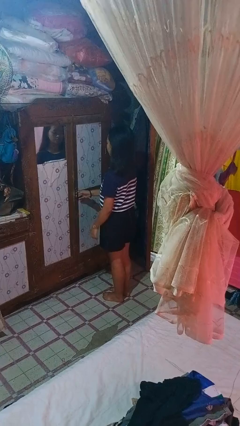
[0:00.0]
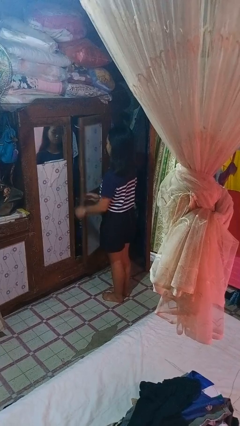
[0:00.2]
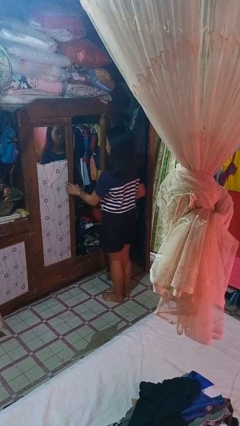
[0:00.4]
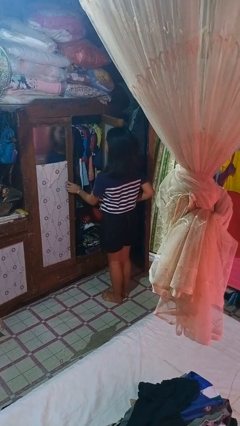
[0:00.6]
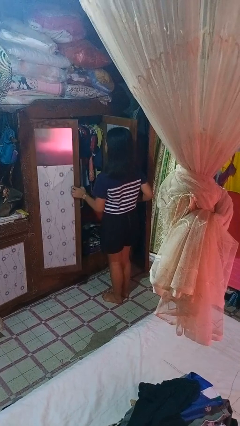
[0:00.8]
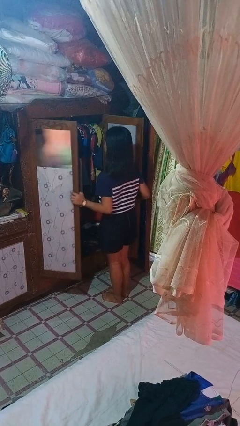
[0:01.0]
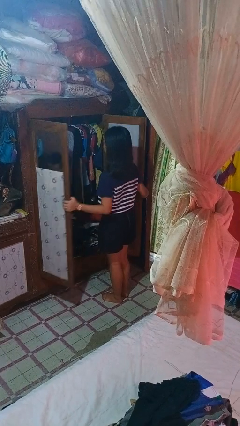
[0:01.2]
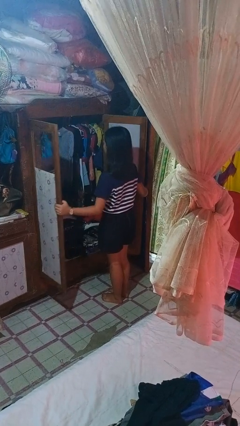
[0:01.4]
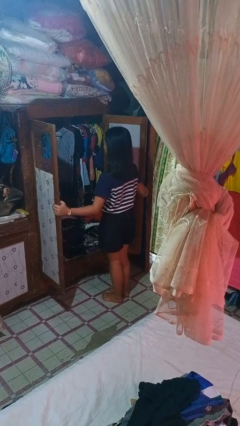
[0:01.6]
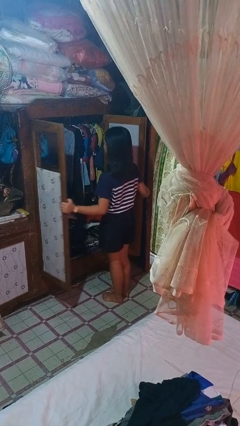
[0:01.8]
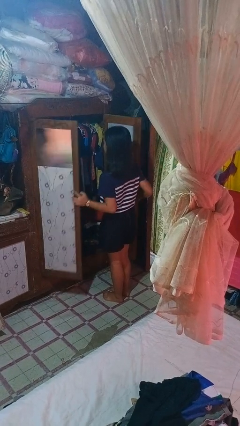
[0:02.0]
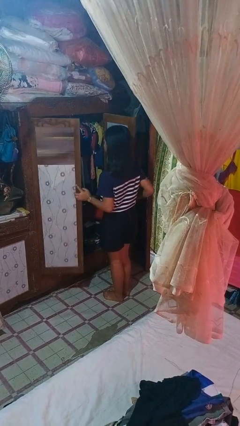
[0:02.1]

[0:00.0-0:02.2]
person opens closet door

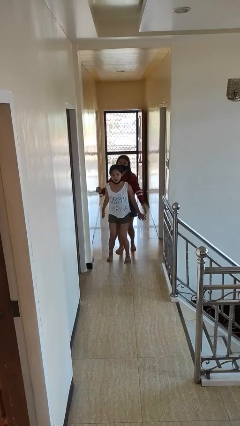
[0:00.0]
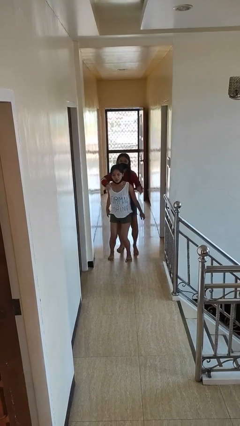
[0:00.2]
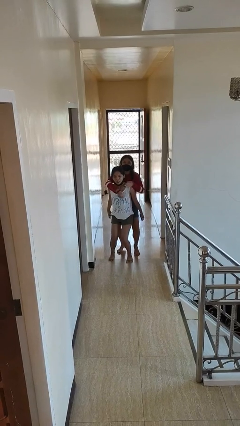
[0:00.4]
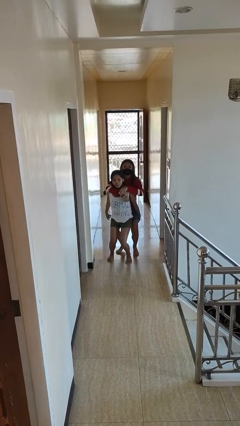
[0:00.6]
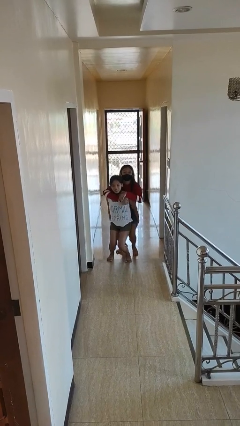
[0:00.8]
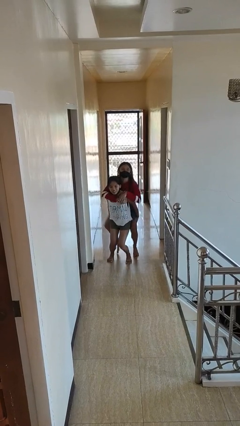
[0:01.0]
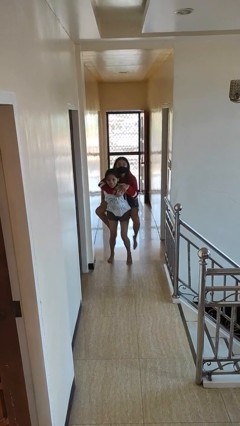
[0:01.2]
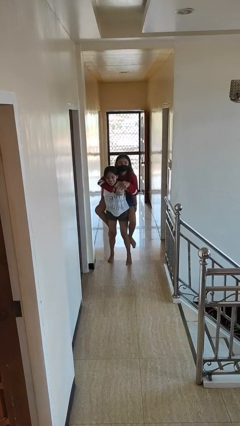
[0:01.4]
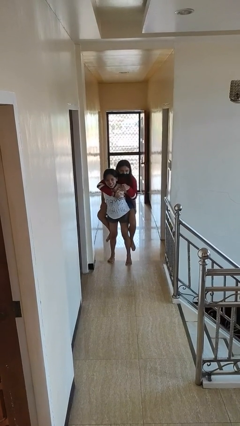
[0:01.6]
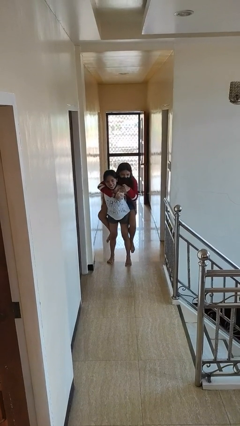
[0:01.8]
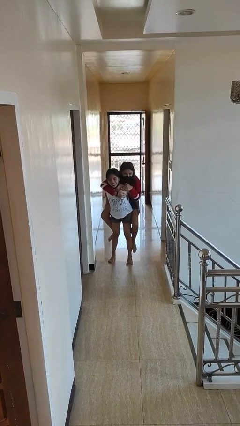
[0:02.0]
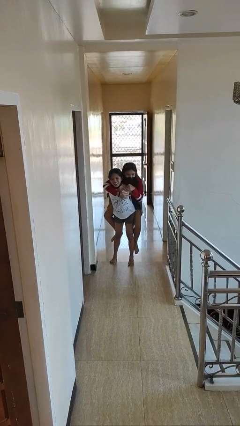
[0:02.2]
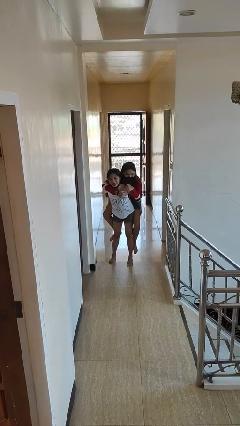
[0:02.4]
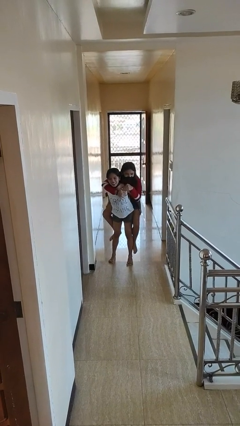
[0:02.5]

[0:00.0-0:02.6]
person carries person over shoulder

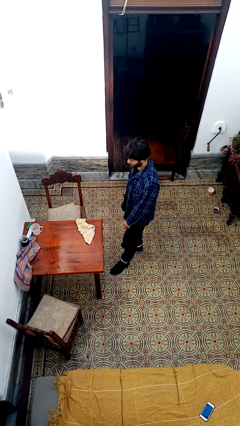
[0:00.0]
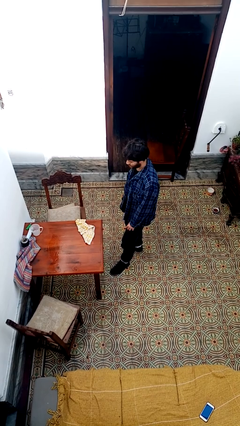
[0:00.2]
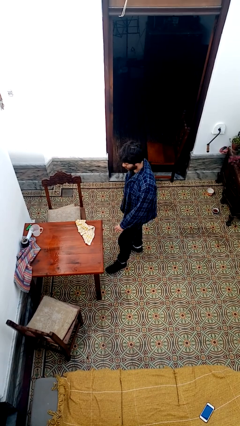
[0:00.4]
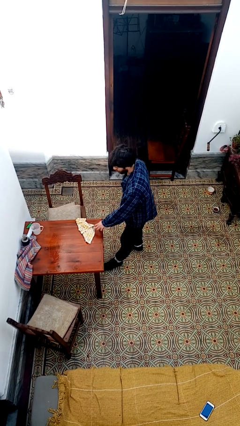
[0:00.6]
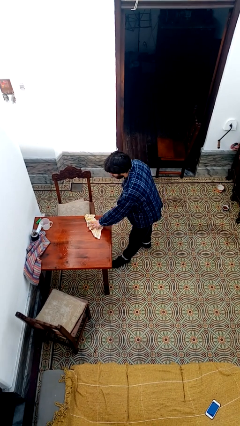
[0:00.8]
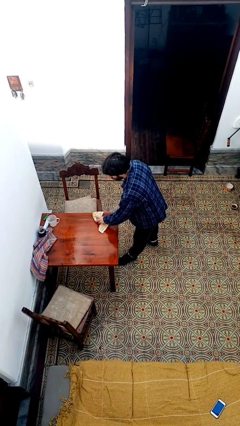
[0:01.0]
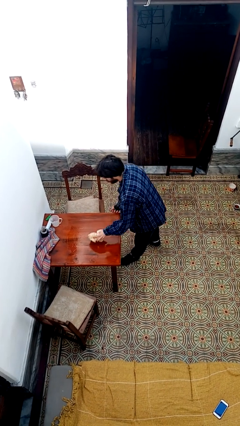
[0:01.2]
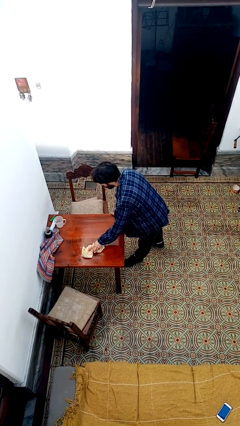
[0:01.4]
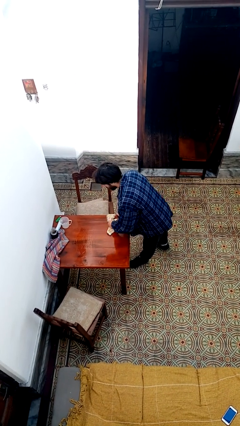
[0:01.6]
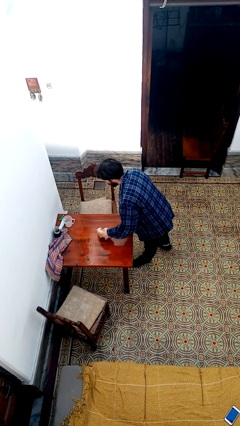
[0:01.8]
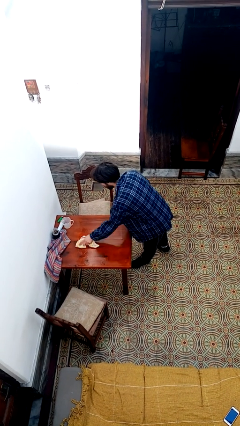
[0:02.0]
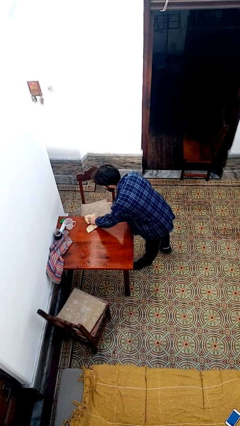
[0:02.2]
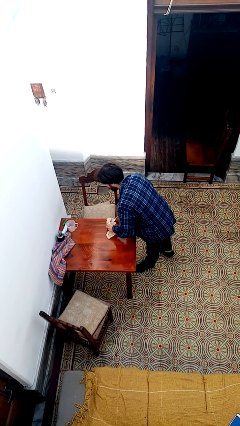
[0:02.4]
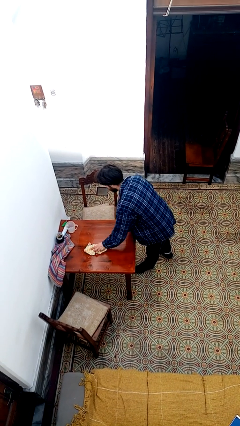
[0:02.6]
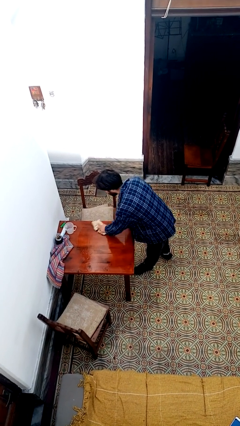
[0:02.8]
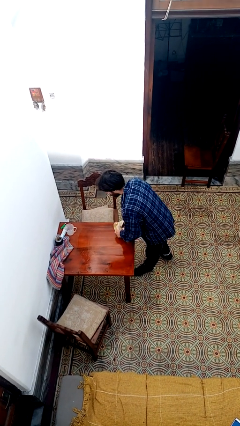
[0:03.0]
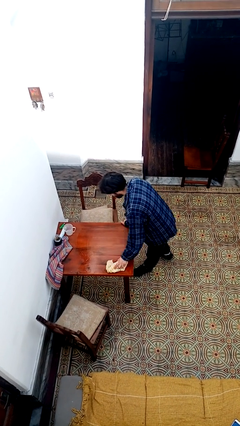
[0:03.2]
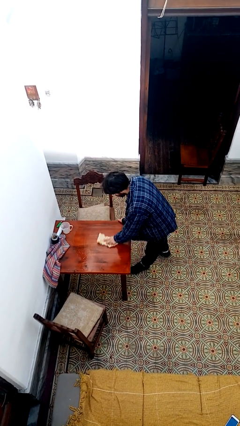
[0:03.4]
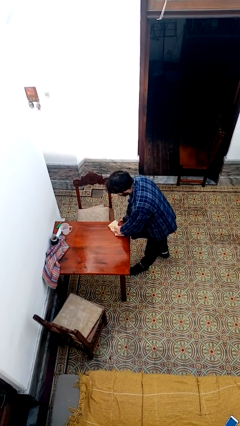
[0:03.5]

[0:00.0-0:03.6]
person cleans table with rag

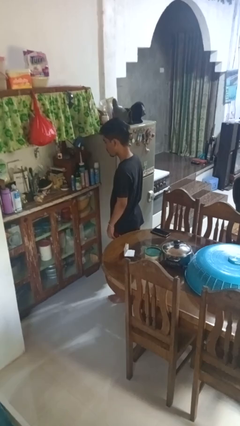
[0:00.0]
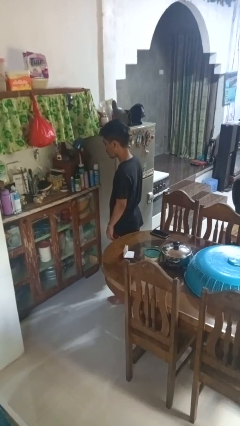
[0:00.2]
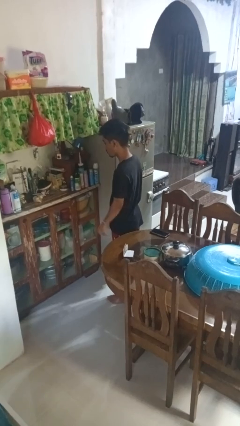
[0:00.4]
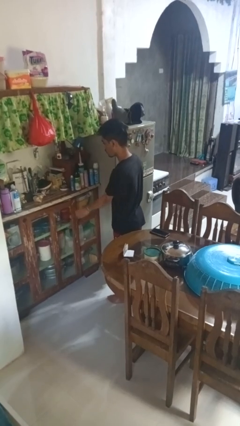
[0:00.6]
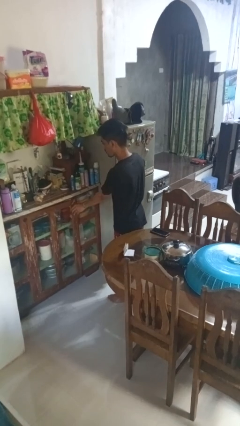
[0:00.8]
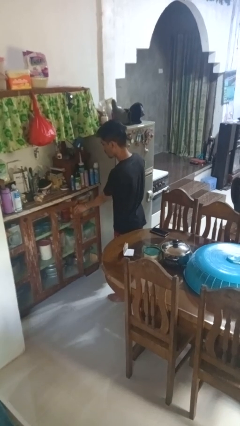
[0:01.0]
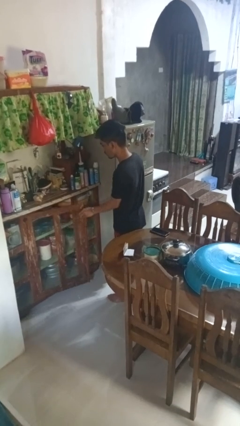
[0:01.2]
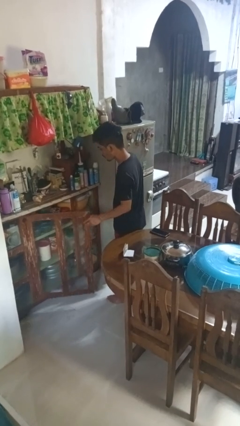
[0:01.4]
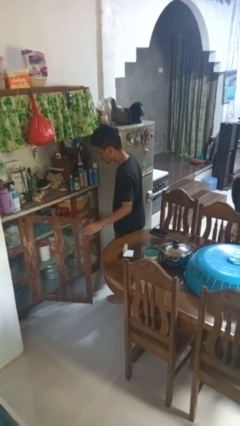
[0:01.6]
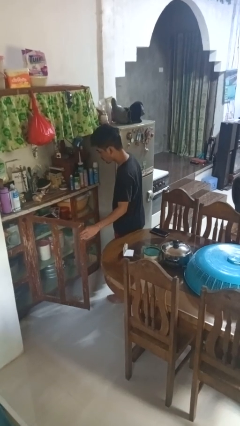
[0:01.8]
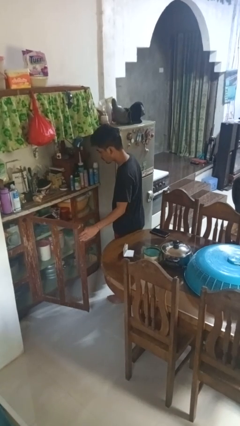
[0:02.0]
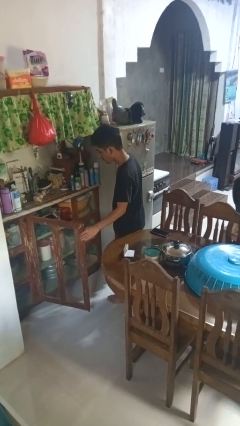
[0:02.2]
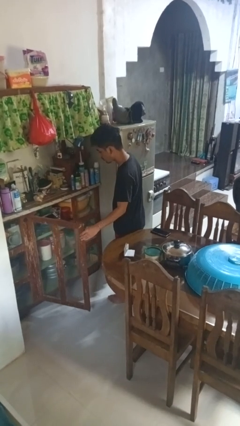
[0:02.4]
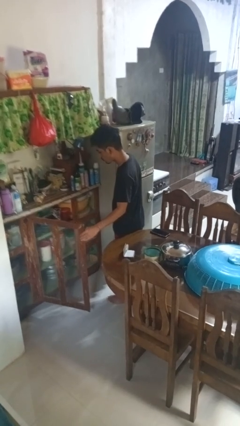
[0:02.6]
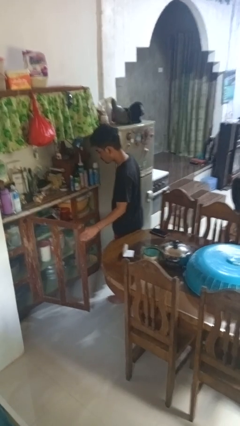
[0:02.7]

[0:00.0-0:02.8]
person opens cabinet

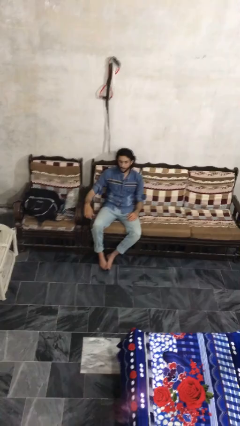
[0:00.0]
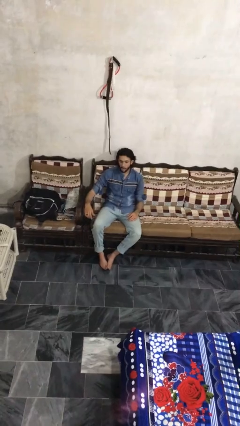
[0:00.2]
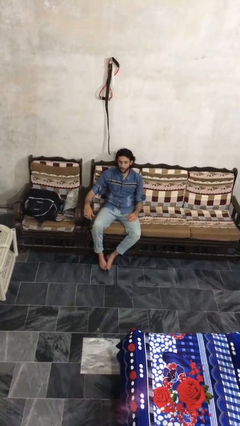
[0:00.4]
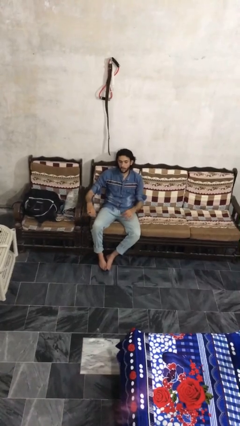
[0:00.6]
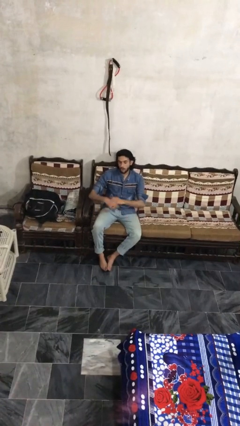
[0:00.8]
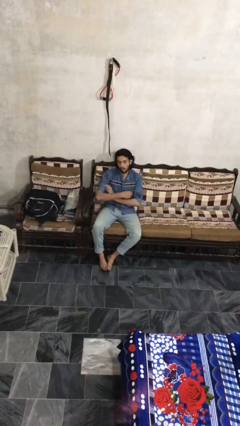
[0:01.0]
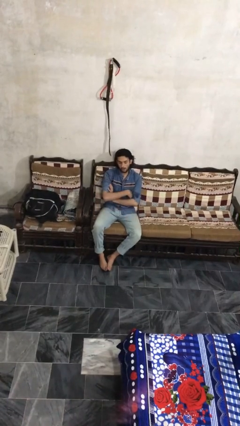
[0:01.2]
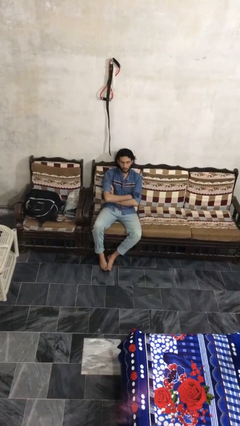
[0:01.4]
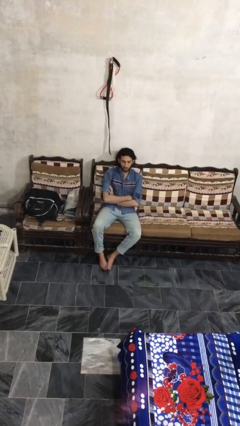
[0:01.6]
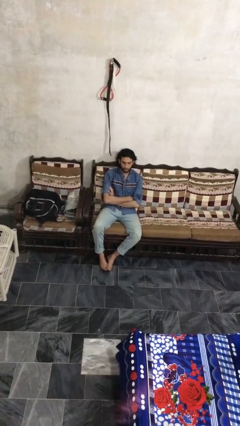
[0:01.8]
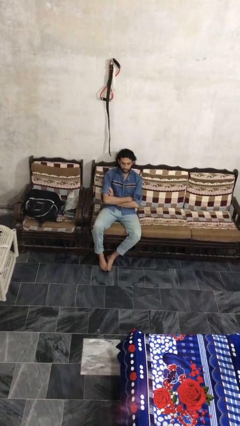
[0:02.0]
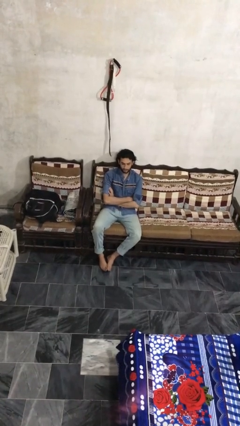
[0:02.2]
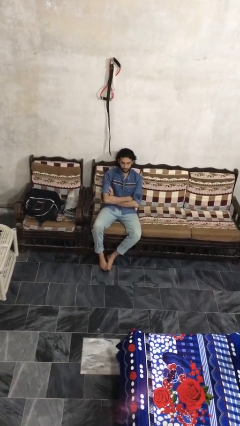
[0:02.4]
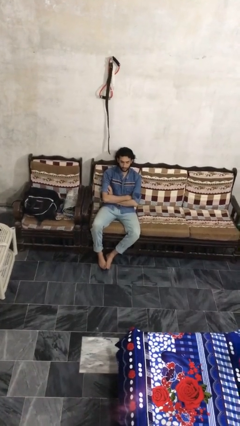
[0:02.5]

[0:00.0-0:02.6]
person crosses arms

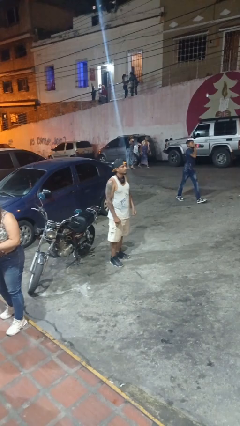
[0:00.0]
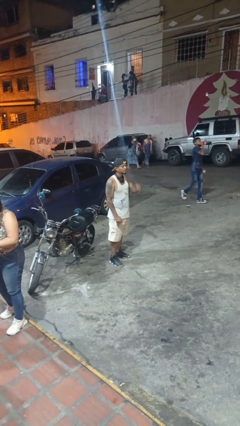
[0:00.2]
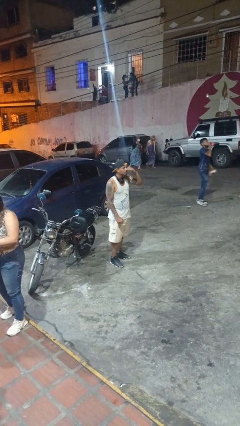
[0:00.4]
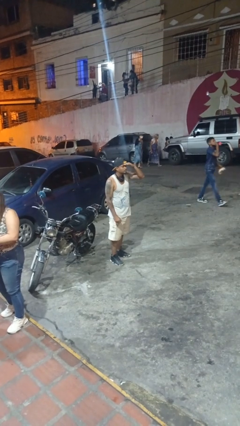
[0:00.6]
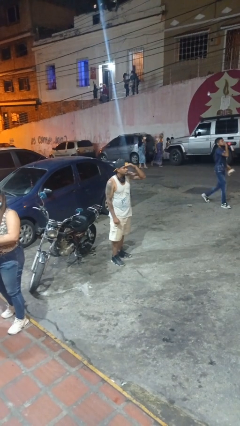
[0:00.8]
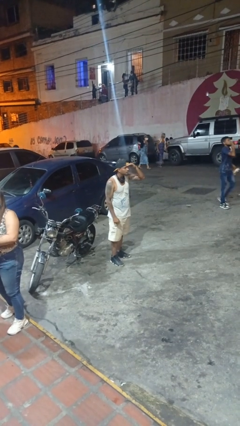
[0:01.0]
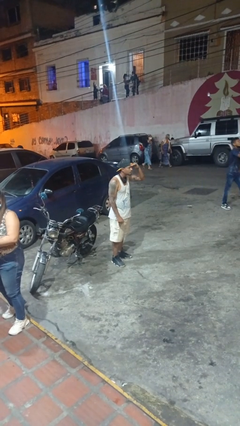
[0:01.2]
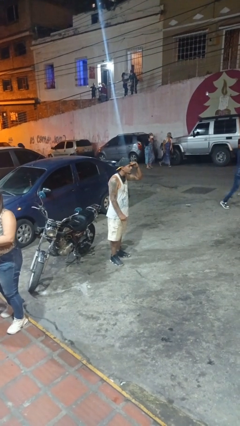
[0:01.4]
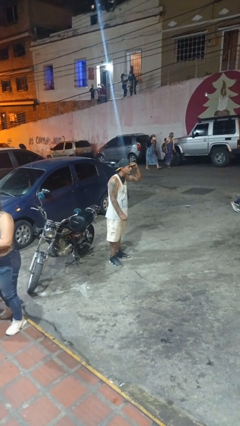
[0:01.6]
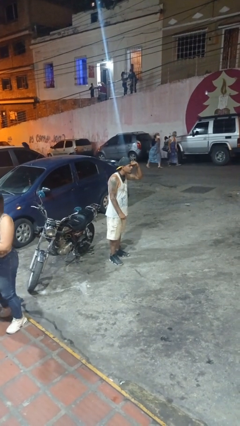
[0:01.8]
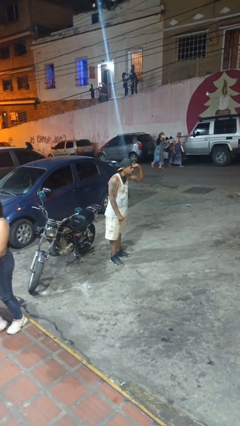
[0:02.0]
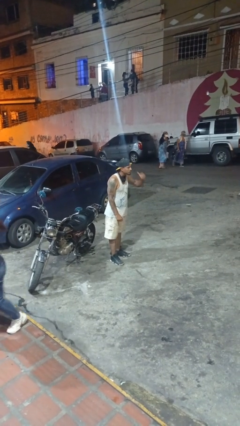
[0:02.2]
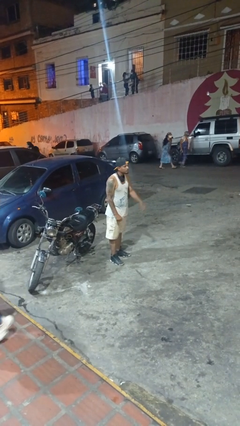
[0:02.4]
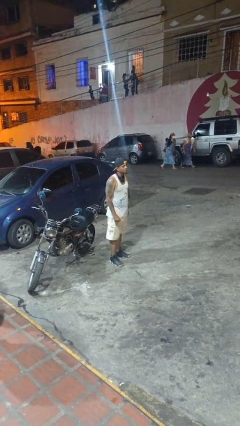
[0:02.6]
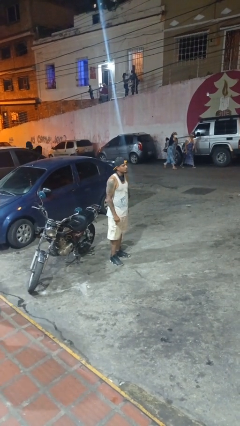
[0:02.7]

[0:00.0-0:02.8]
person shades eyes

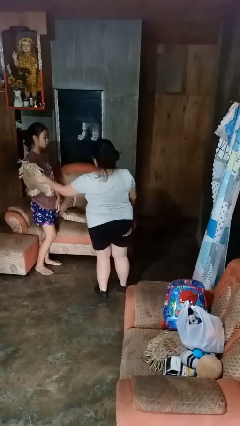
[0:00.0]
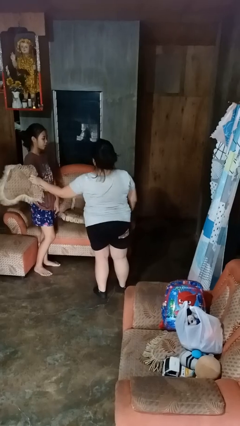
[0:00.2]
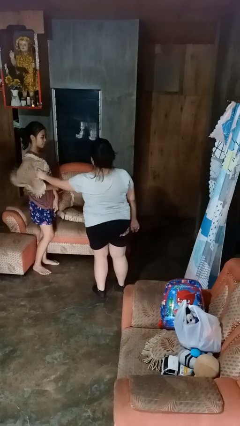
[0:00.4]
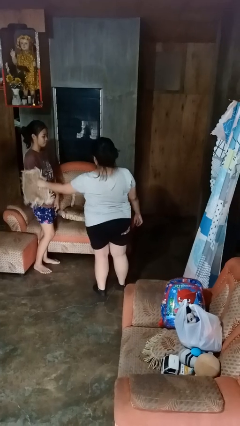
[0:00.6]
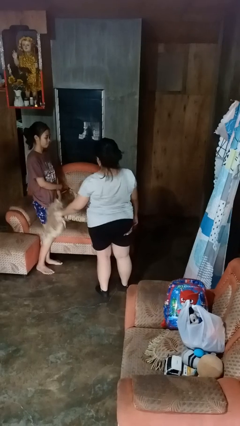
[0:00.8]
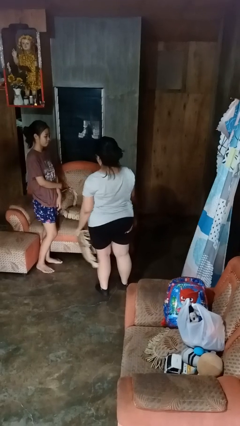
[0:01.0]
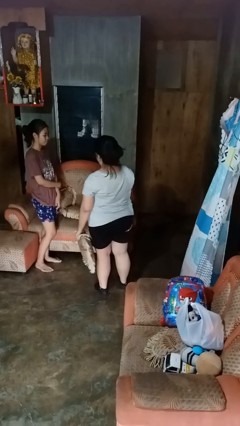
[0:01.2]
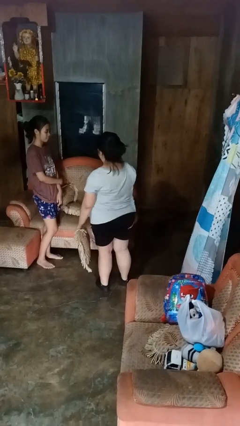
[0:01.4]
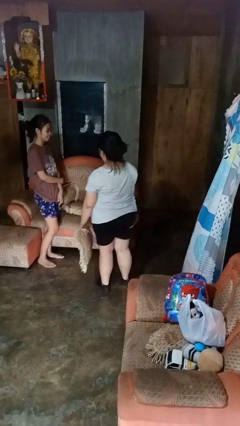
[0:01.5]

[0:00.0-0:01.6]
person hits person with pillow
